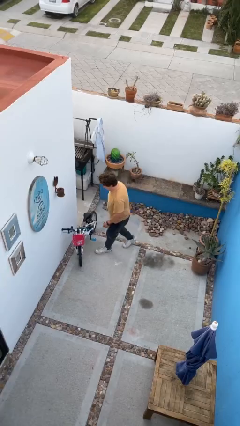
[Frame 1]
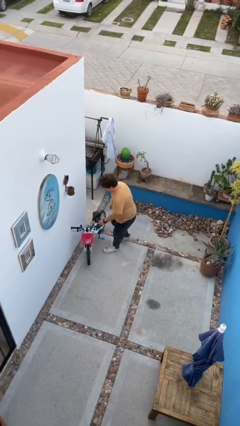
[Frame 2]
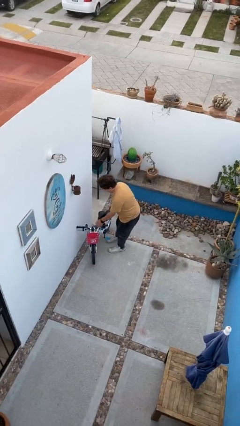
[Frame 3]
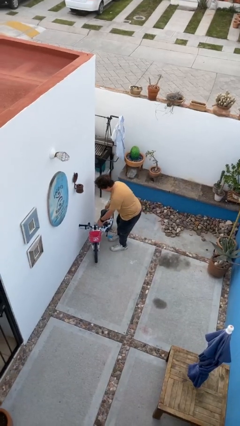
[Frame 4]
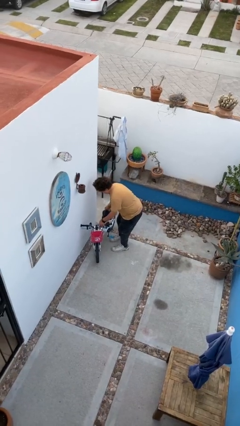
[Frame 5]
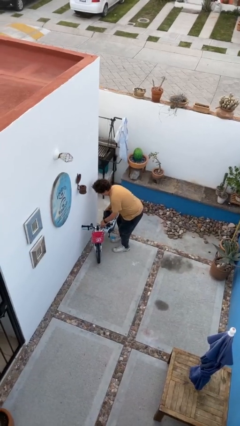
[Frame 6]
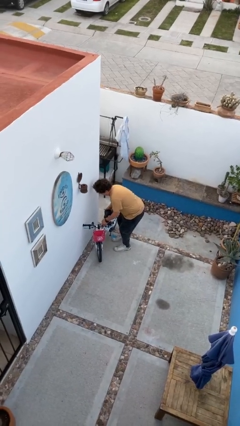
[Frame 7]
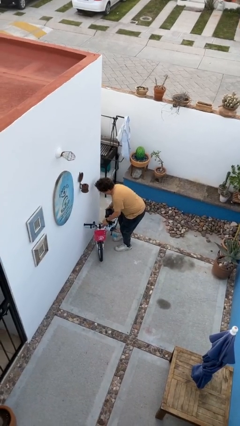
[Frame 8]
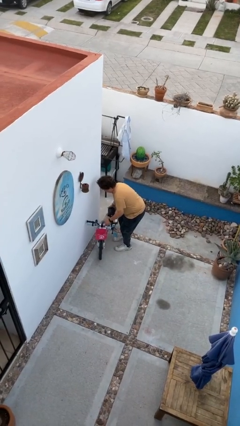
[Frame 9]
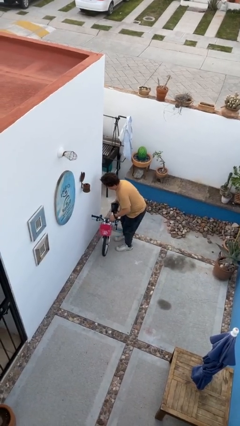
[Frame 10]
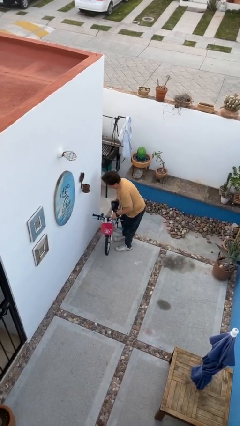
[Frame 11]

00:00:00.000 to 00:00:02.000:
person picks up object from floor

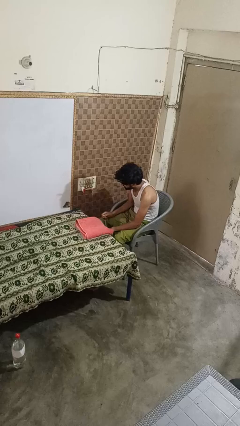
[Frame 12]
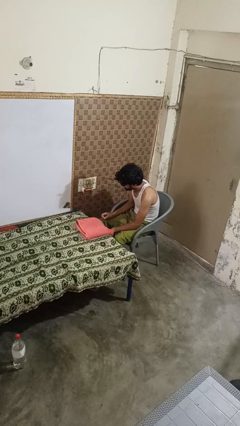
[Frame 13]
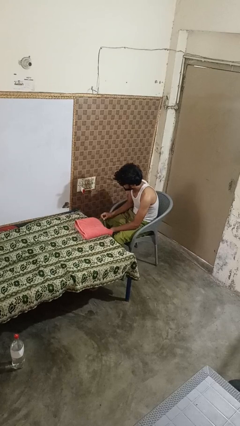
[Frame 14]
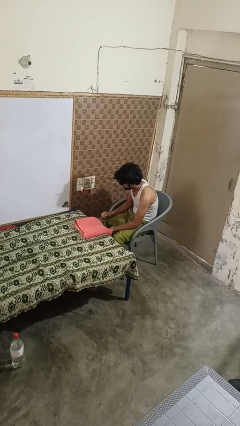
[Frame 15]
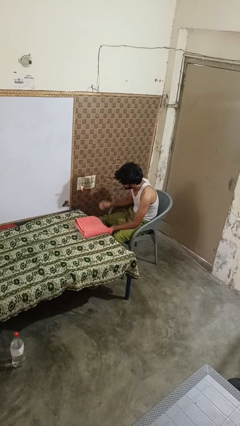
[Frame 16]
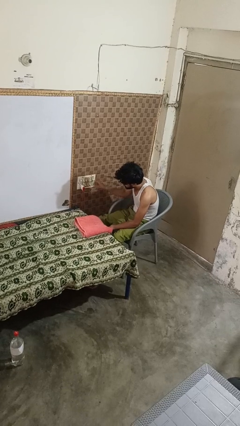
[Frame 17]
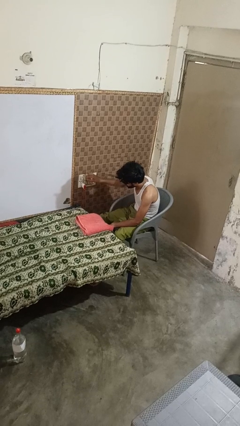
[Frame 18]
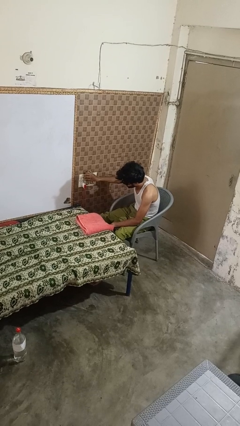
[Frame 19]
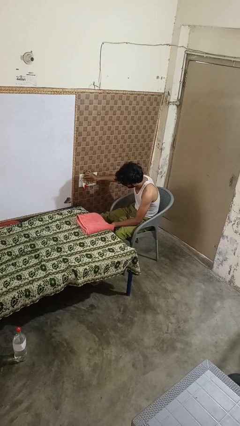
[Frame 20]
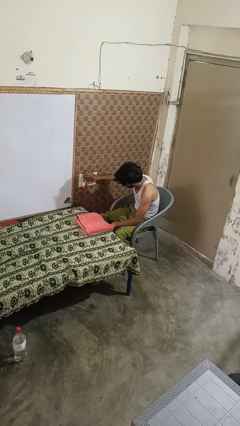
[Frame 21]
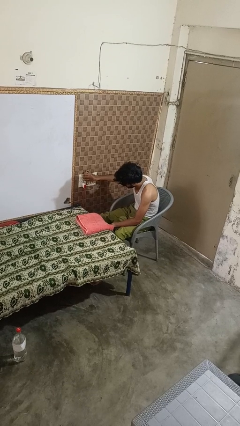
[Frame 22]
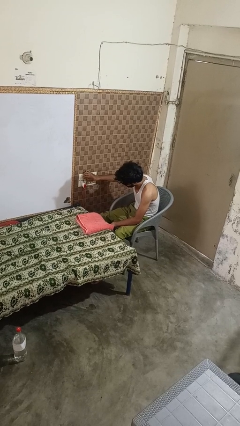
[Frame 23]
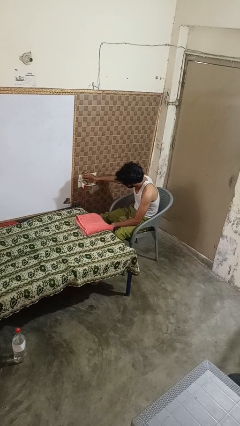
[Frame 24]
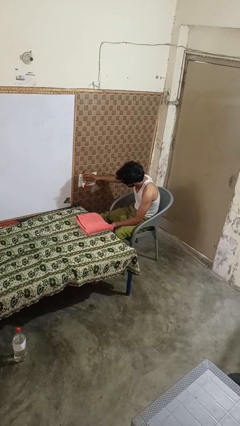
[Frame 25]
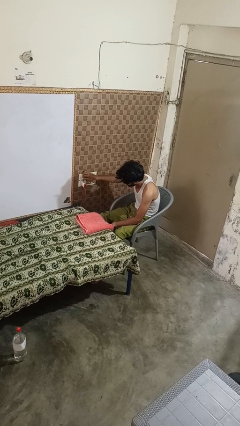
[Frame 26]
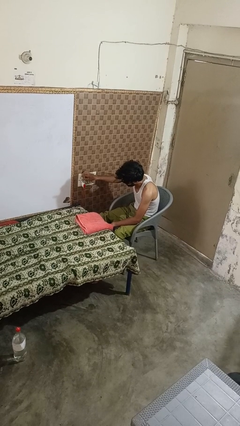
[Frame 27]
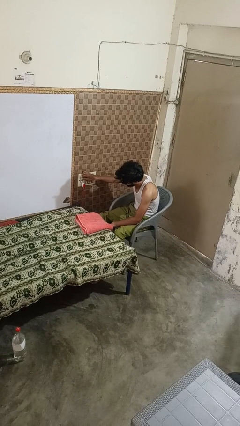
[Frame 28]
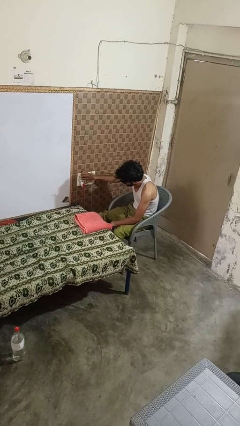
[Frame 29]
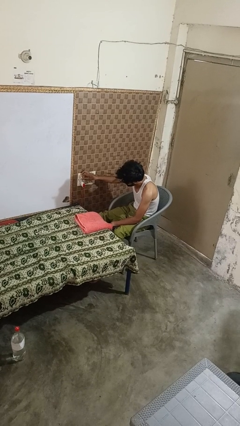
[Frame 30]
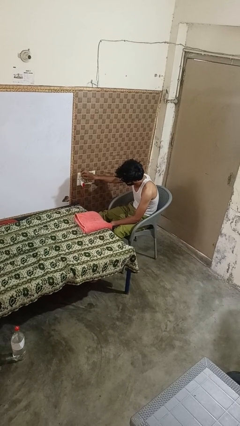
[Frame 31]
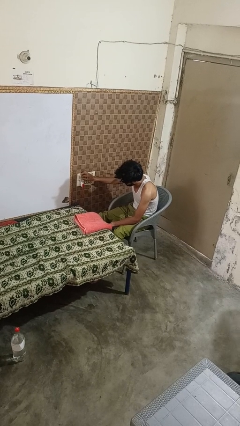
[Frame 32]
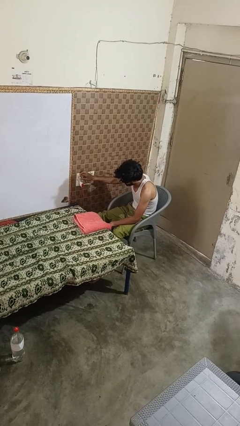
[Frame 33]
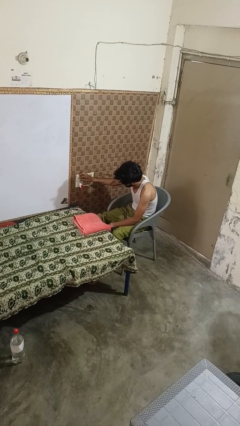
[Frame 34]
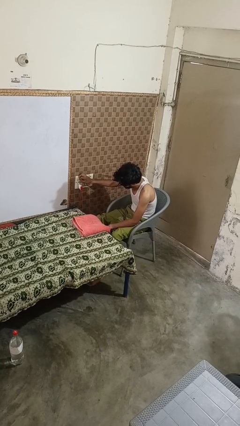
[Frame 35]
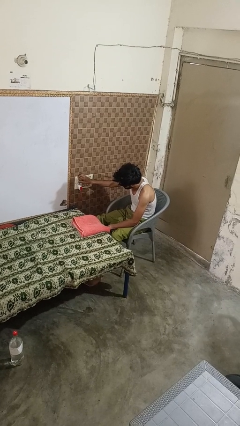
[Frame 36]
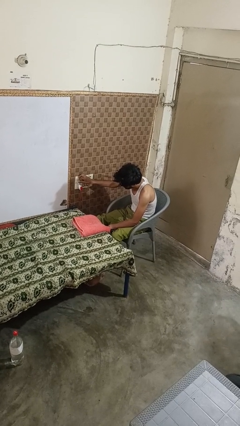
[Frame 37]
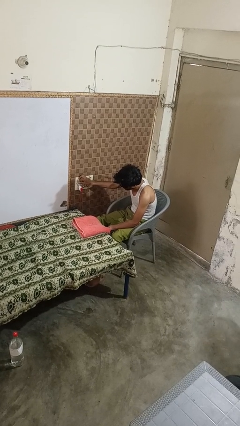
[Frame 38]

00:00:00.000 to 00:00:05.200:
person adjusts thermostat

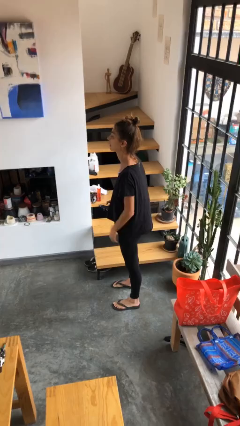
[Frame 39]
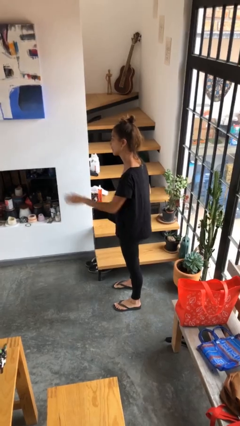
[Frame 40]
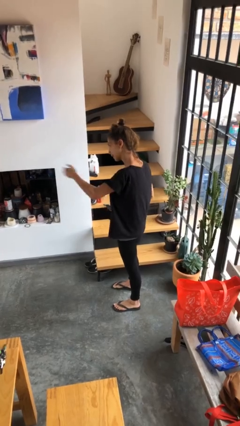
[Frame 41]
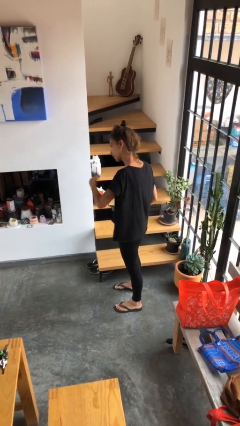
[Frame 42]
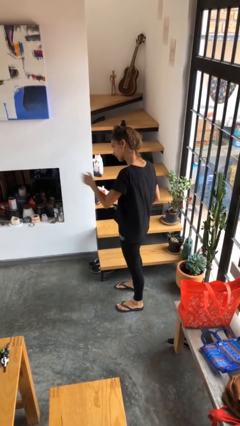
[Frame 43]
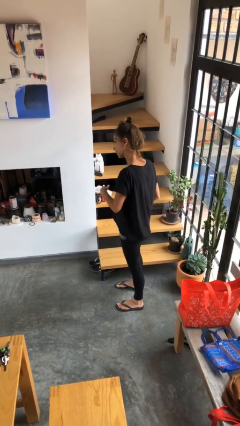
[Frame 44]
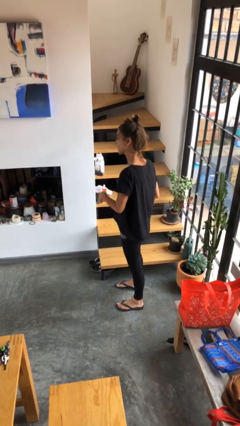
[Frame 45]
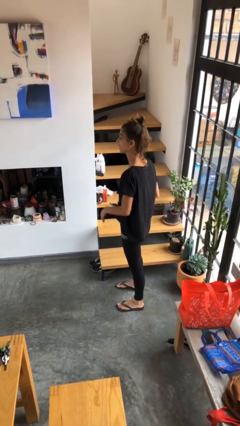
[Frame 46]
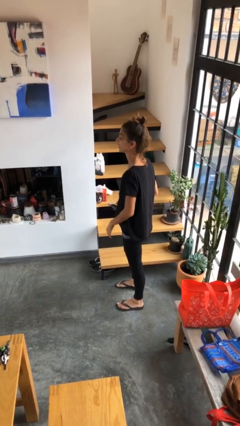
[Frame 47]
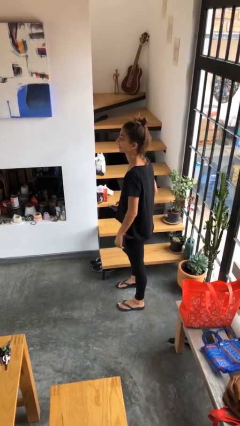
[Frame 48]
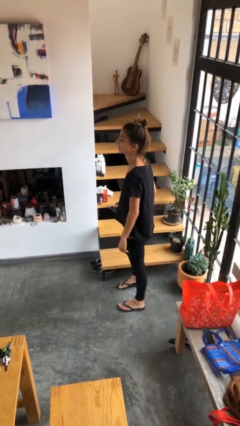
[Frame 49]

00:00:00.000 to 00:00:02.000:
person gestures come here

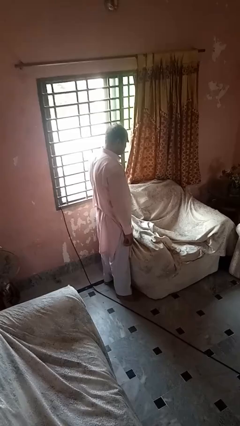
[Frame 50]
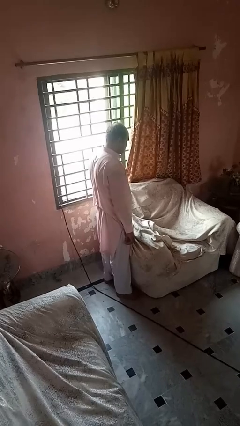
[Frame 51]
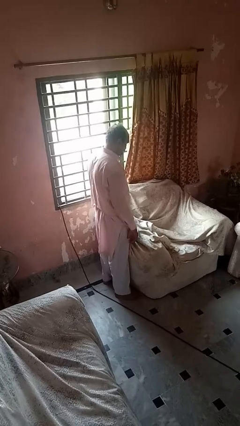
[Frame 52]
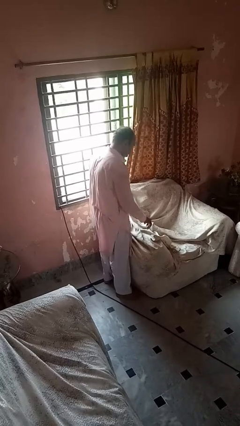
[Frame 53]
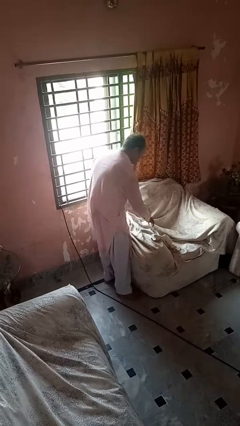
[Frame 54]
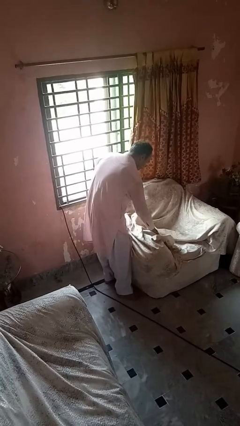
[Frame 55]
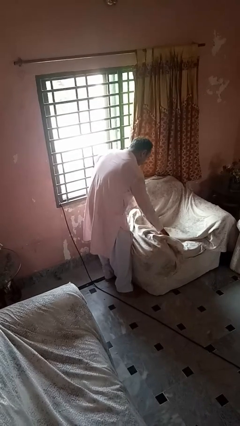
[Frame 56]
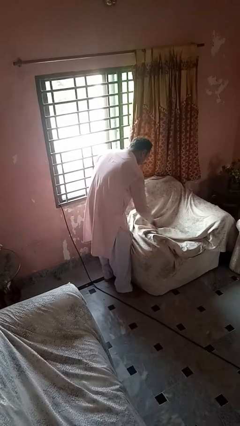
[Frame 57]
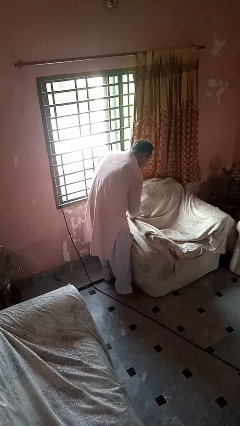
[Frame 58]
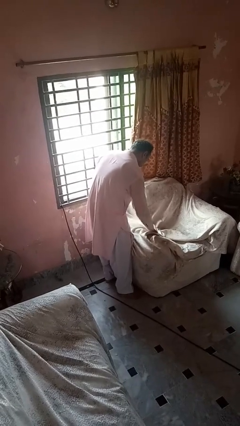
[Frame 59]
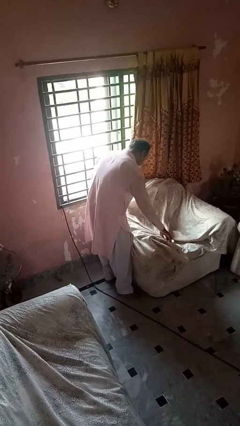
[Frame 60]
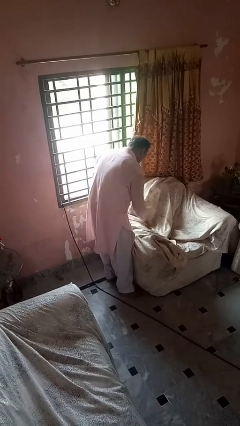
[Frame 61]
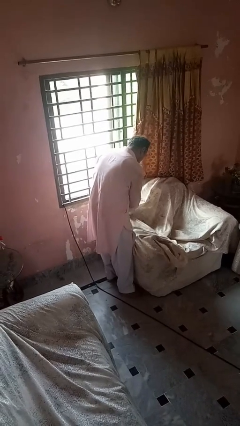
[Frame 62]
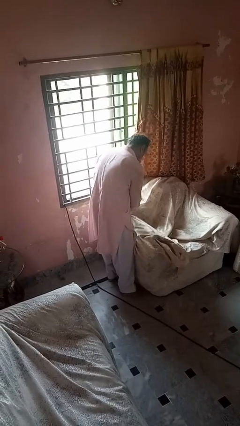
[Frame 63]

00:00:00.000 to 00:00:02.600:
person searches in couch

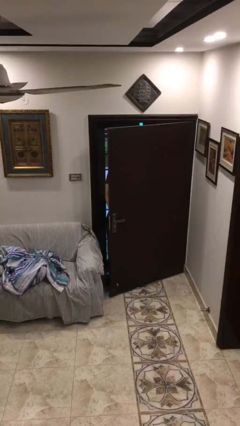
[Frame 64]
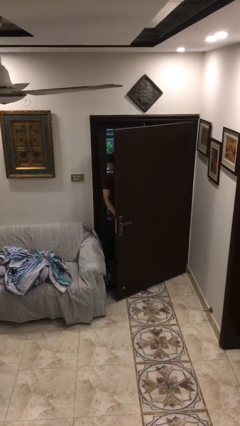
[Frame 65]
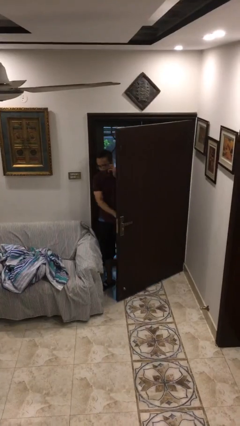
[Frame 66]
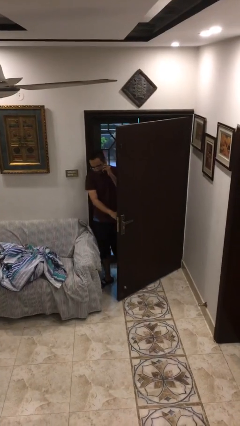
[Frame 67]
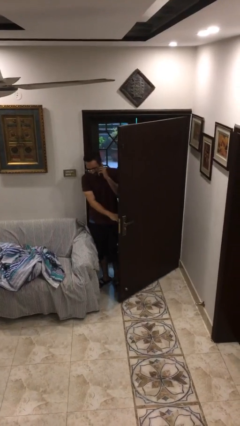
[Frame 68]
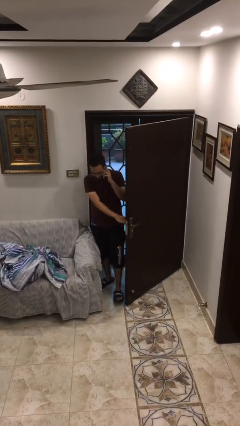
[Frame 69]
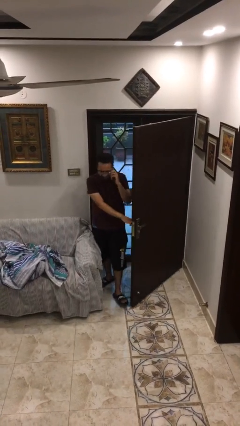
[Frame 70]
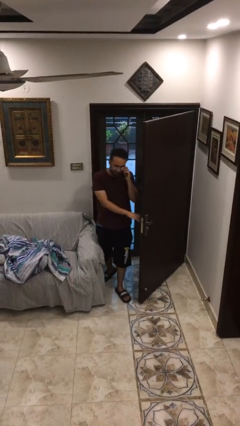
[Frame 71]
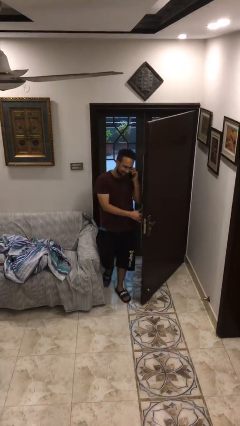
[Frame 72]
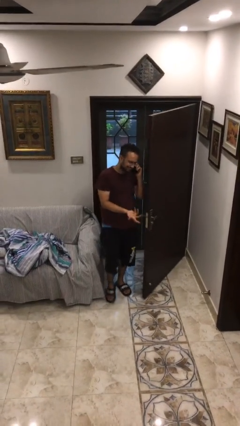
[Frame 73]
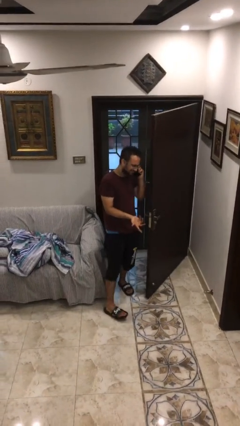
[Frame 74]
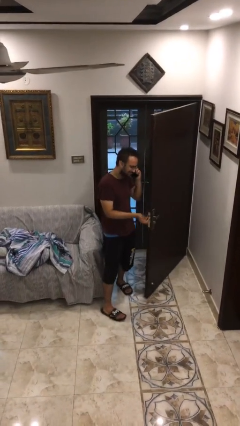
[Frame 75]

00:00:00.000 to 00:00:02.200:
person enters scene through structure

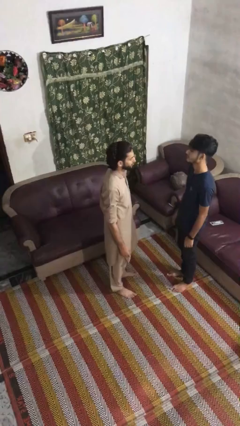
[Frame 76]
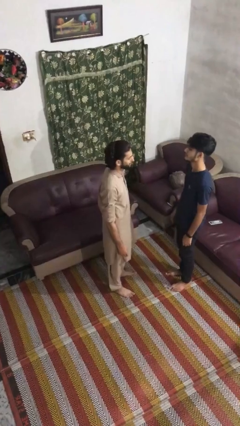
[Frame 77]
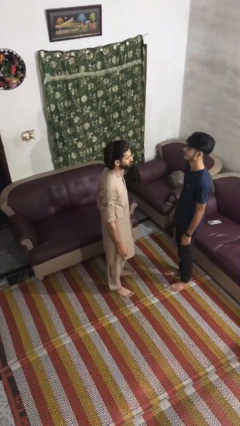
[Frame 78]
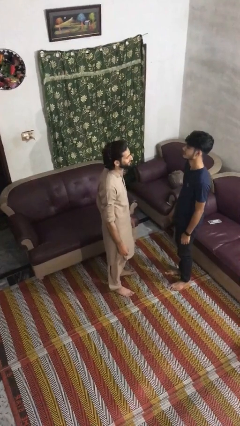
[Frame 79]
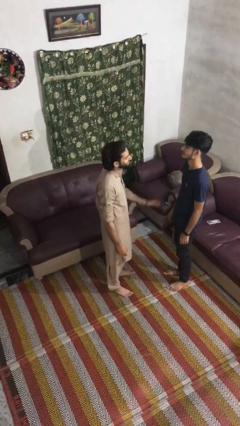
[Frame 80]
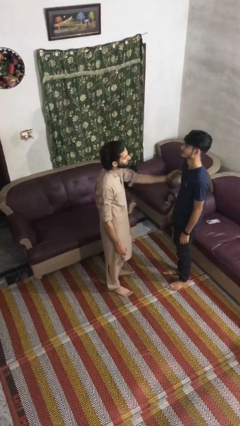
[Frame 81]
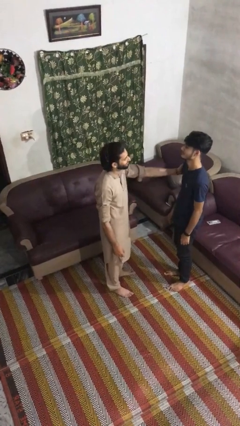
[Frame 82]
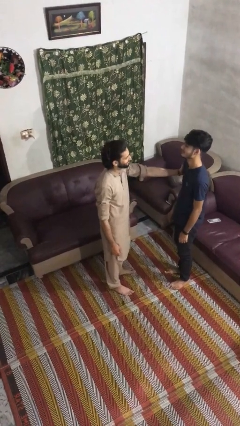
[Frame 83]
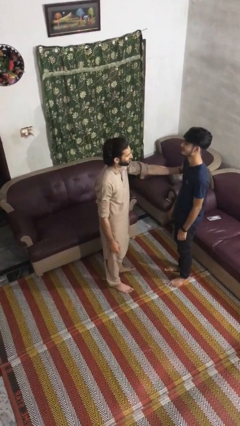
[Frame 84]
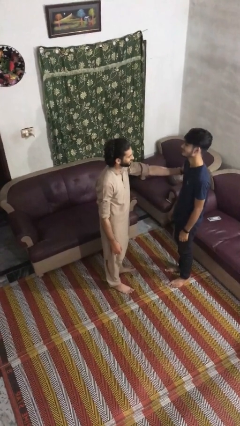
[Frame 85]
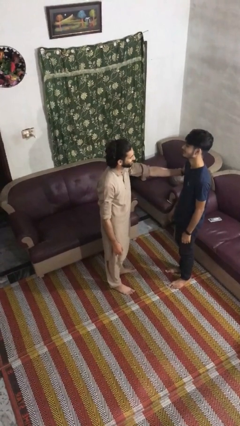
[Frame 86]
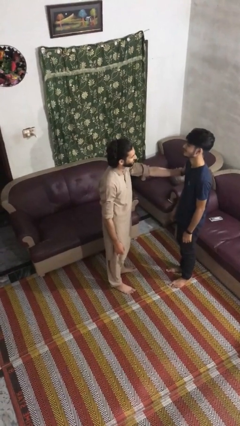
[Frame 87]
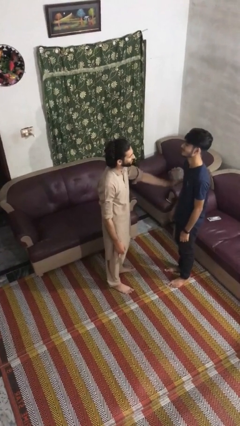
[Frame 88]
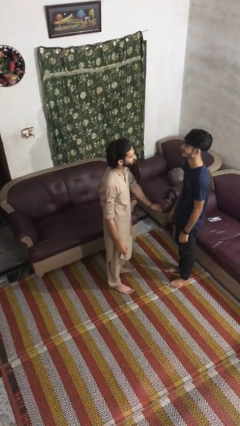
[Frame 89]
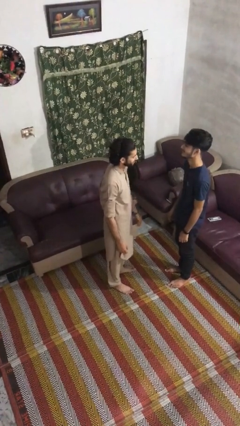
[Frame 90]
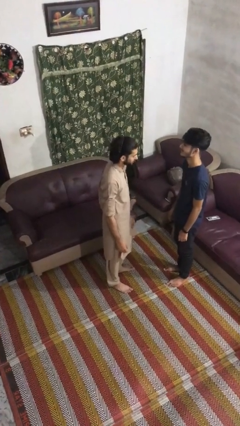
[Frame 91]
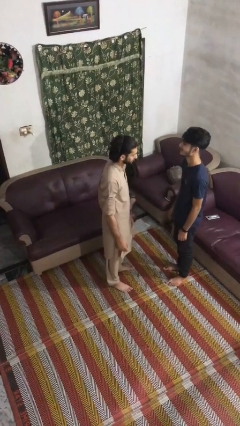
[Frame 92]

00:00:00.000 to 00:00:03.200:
person grabs person by bicep

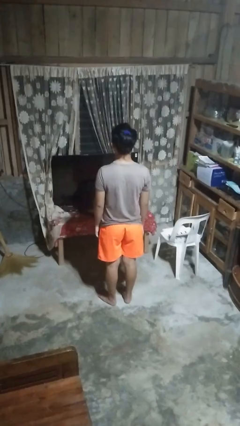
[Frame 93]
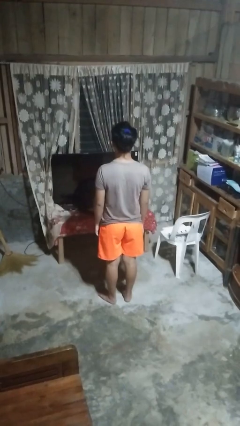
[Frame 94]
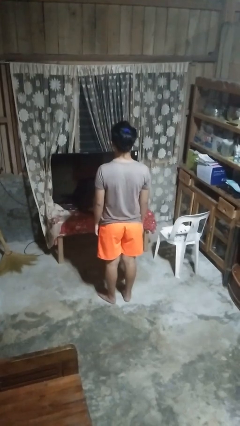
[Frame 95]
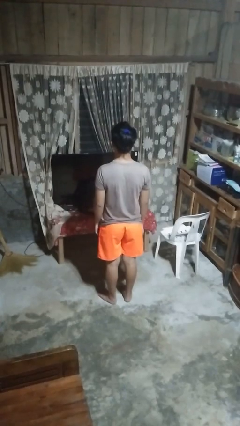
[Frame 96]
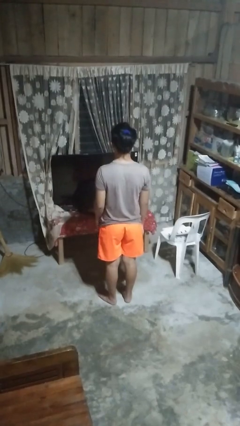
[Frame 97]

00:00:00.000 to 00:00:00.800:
person gestures number five
